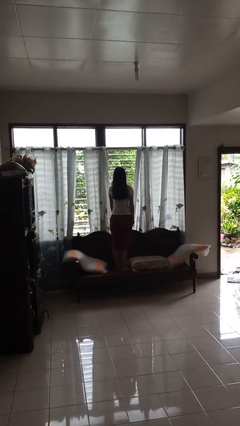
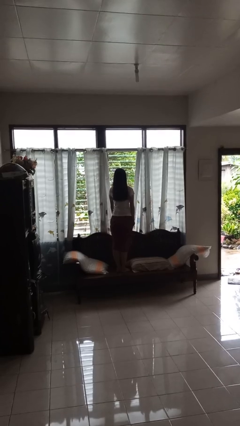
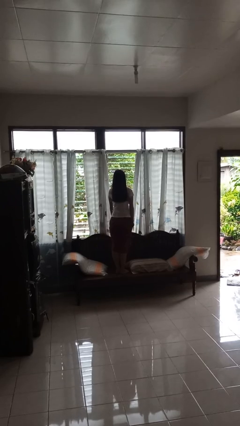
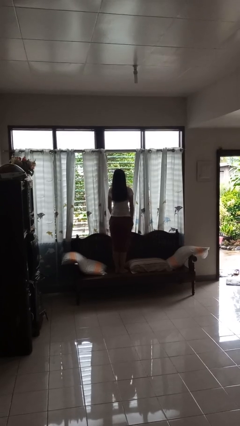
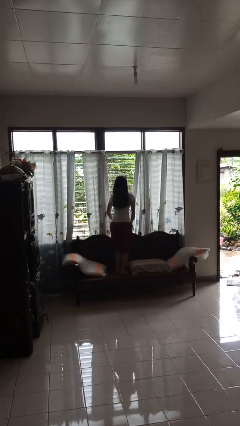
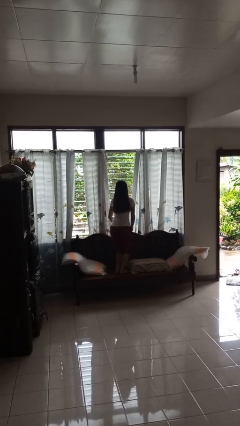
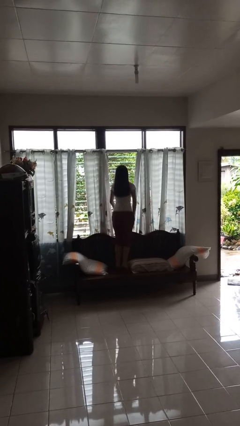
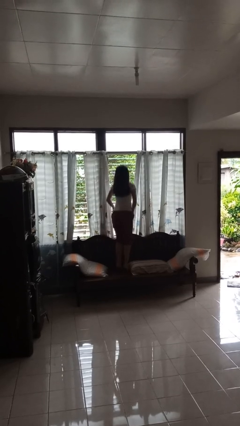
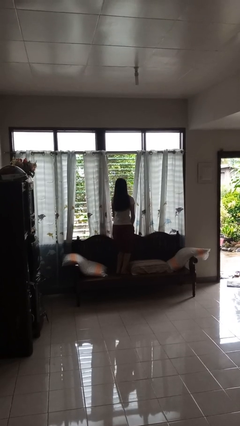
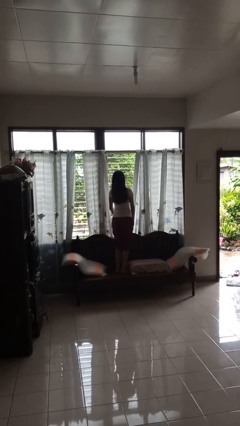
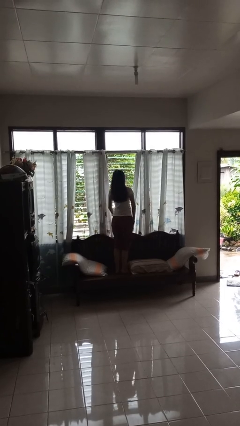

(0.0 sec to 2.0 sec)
person jumps on couch

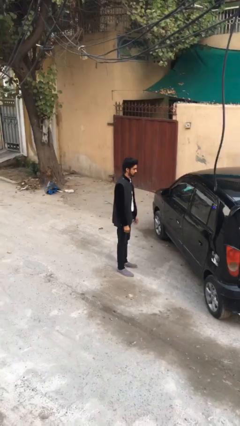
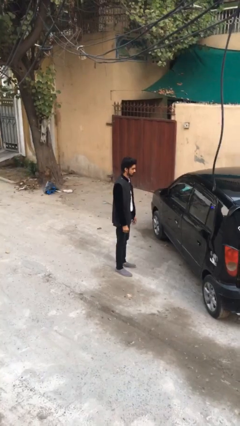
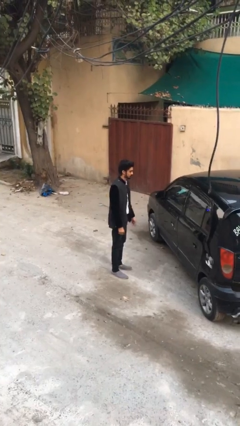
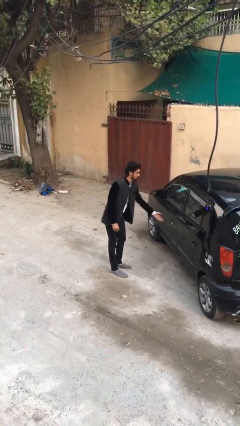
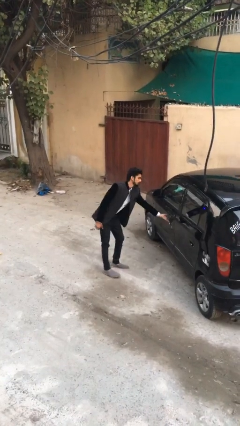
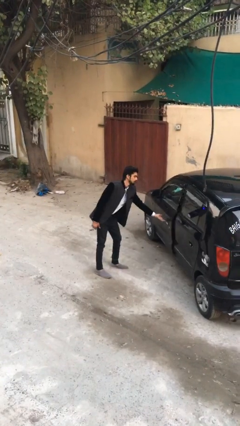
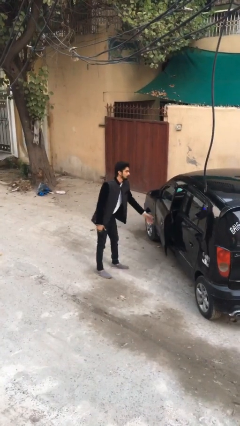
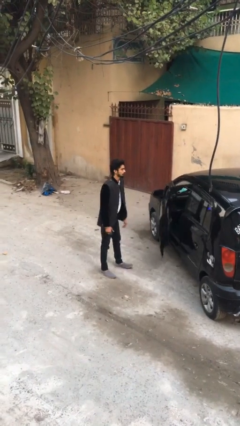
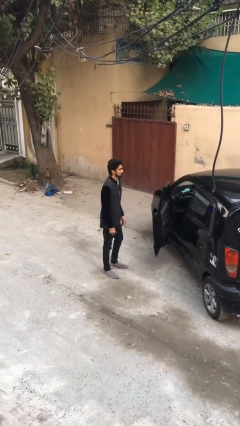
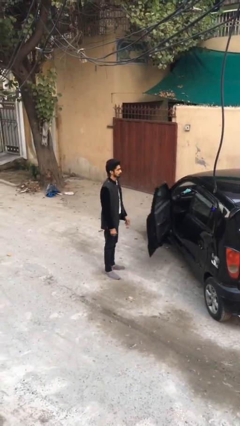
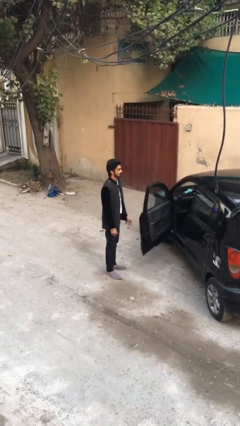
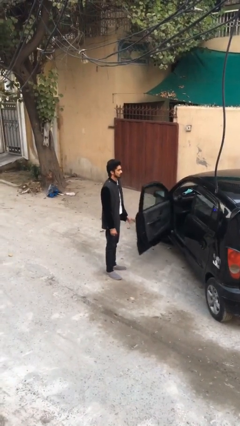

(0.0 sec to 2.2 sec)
person opens car door

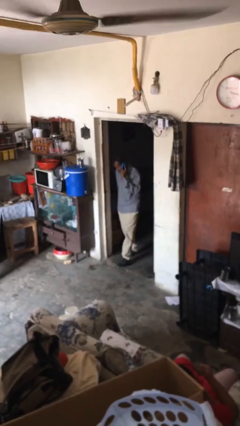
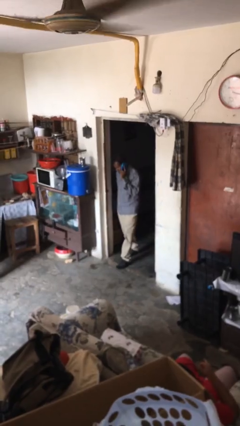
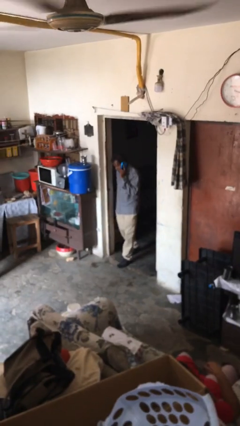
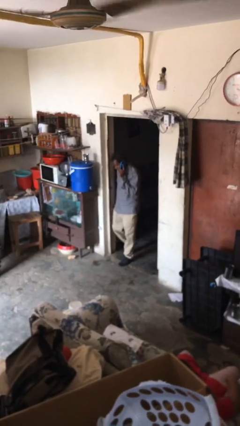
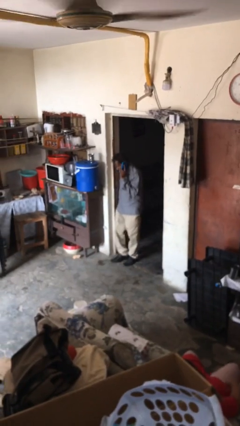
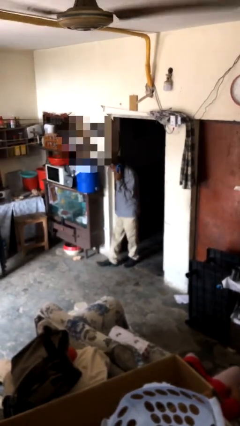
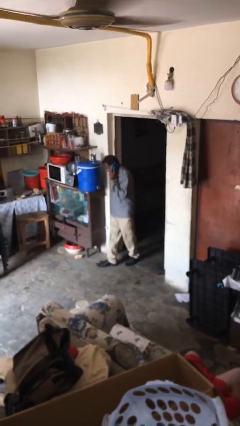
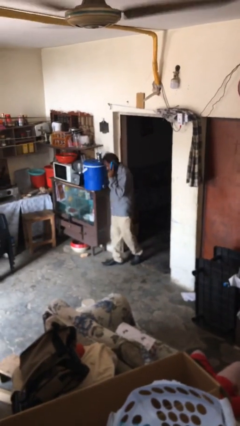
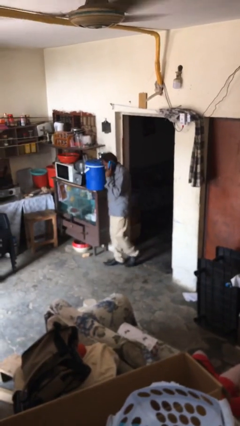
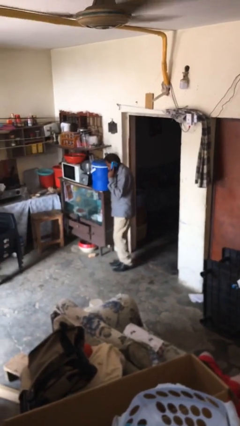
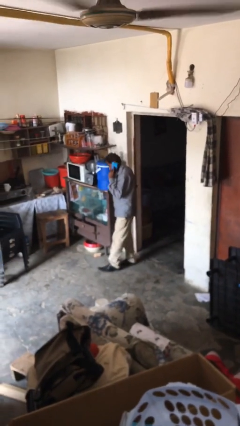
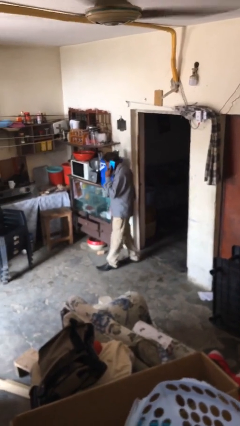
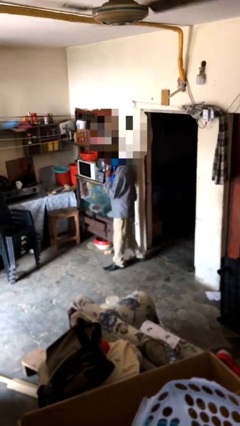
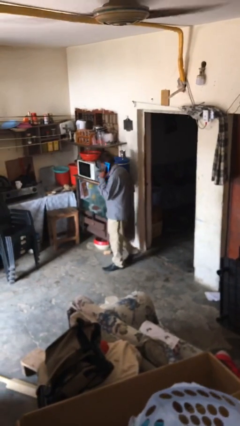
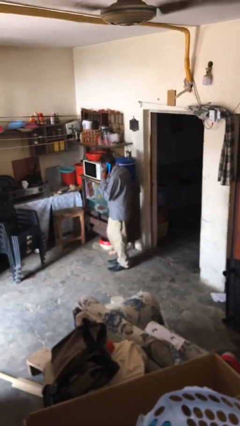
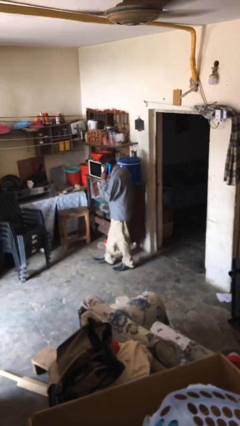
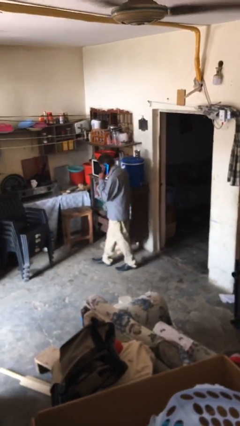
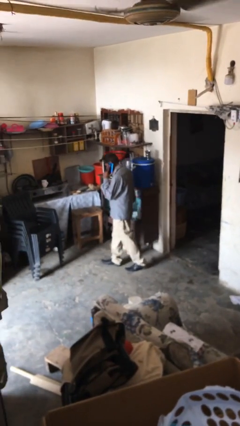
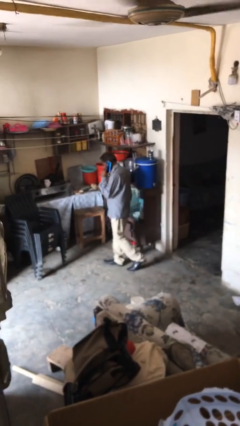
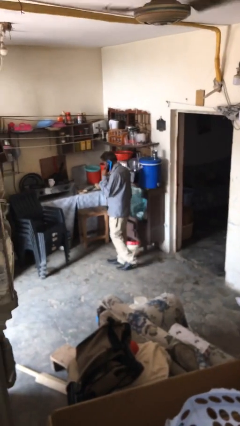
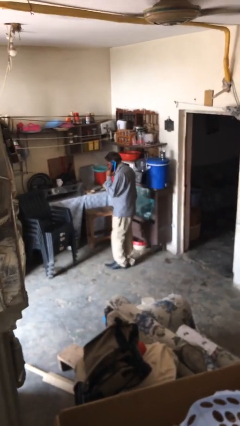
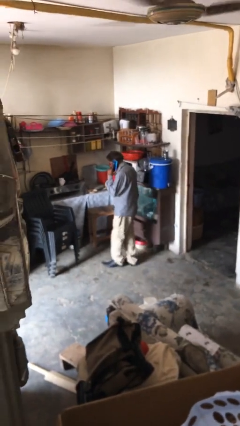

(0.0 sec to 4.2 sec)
person enters scene through structure

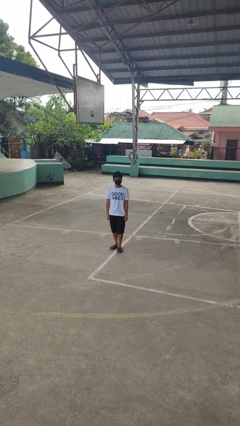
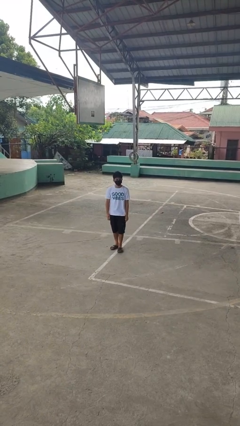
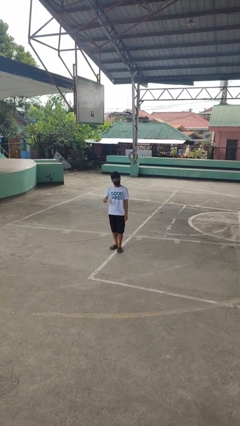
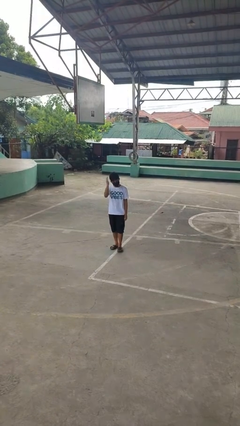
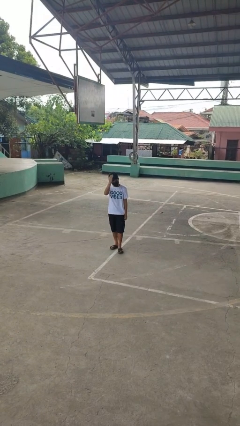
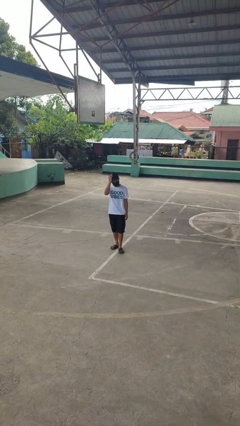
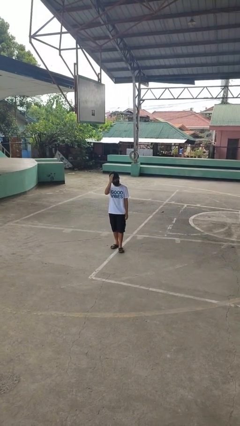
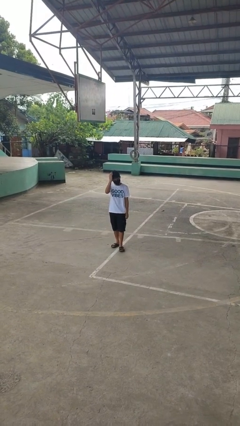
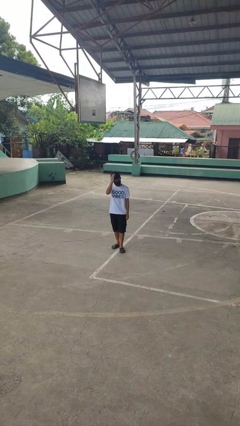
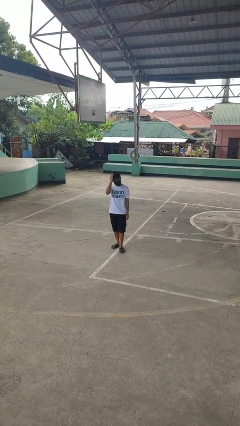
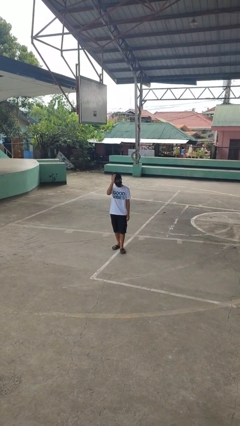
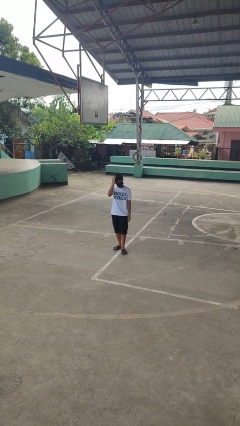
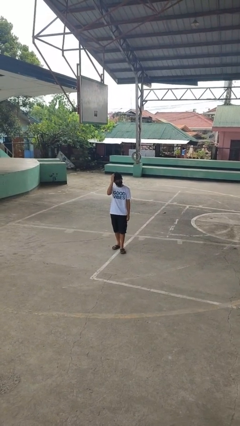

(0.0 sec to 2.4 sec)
person pats head

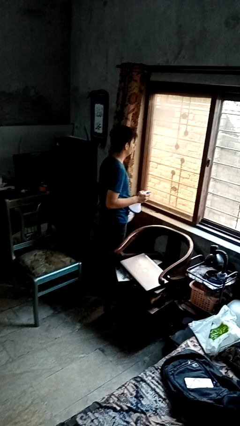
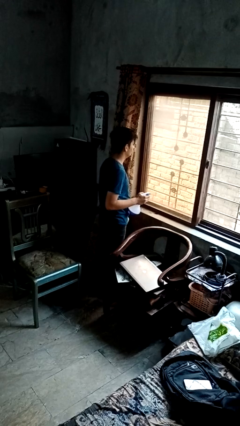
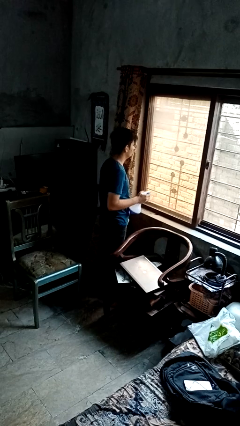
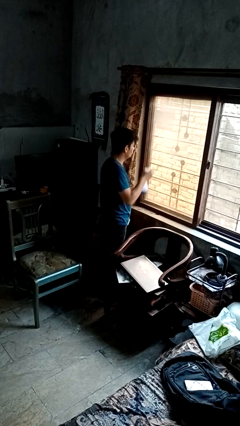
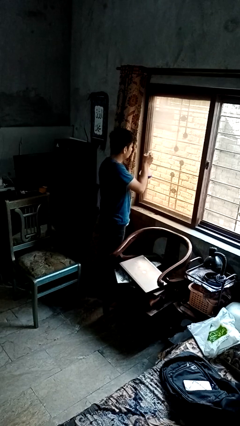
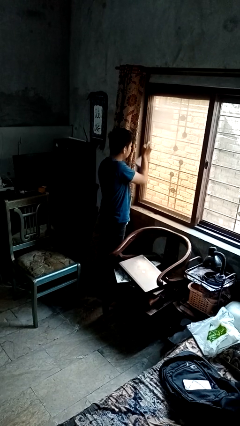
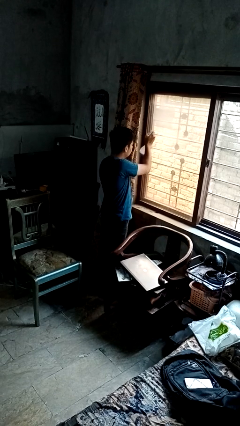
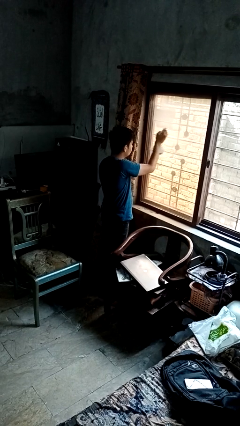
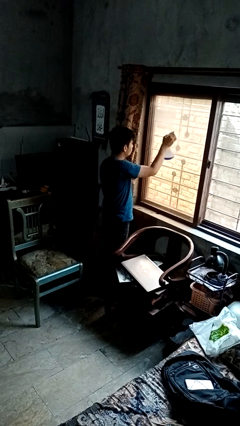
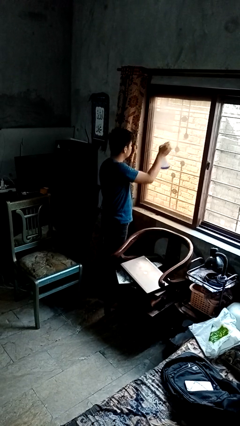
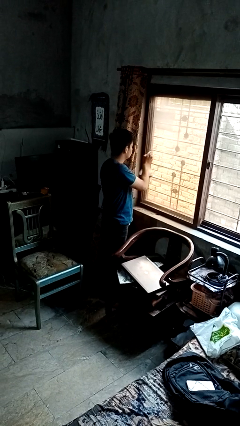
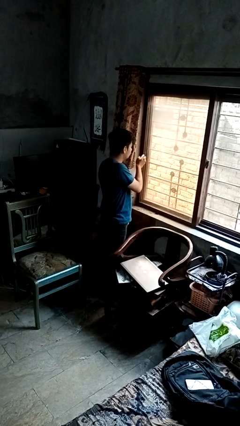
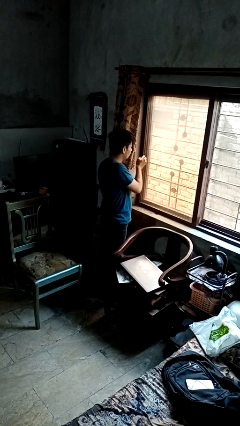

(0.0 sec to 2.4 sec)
person sprays from bottle

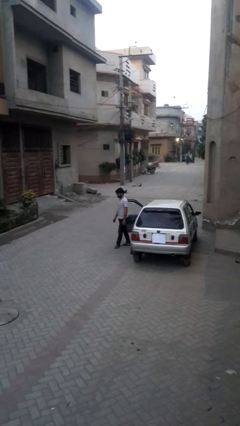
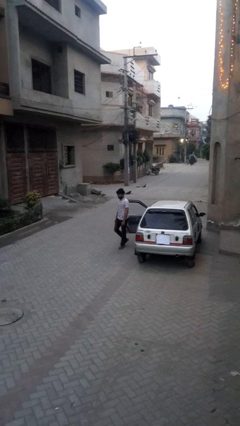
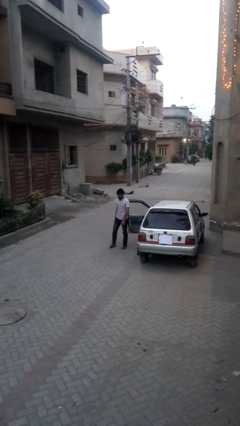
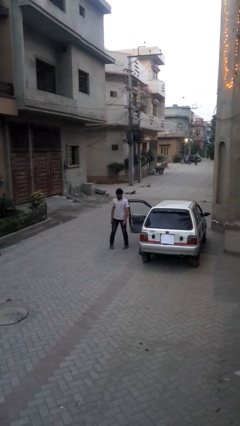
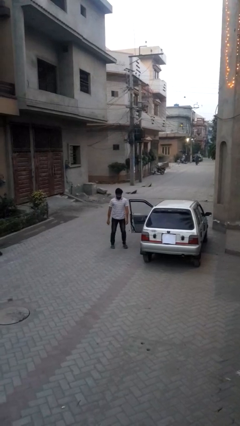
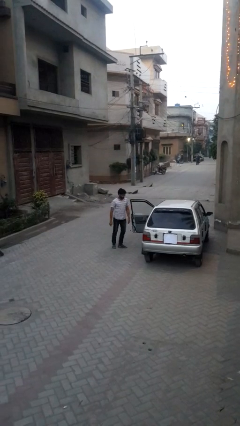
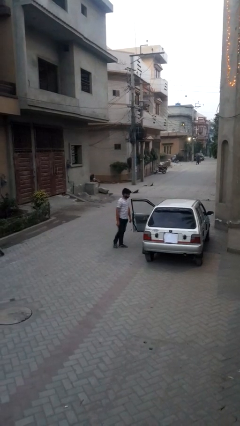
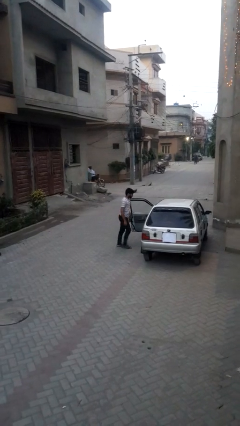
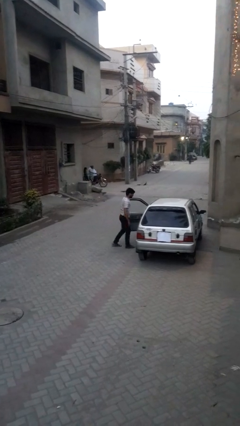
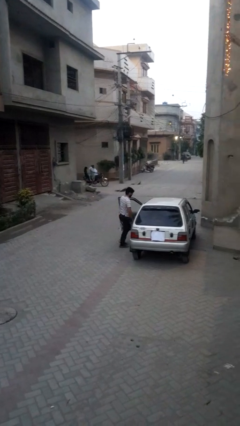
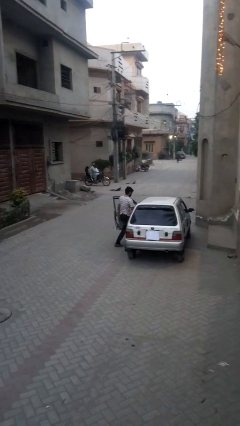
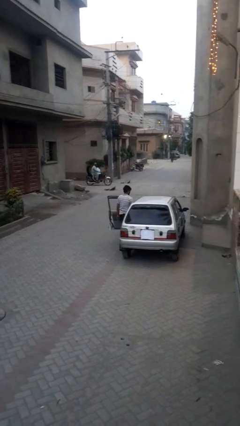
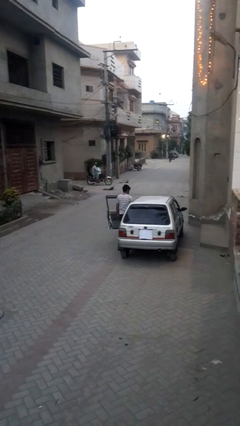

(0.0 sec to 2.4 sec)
person exits car

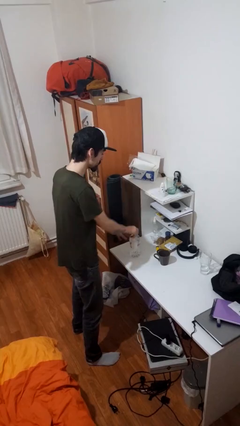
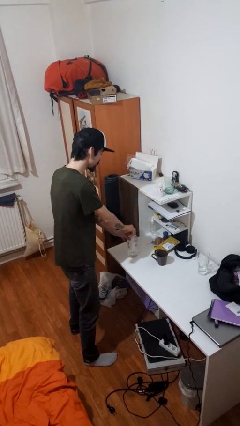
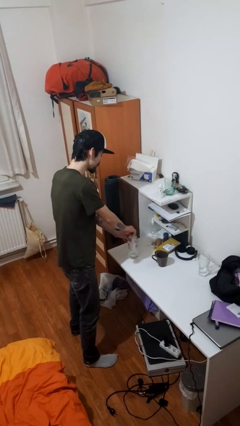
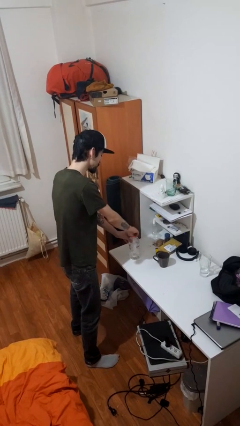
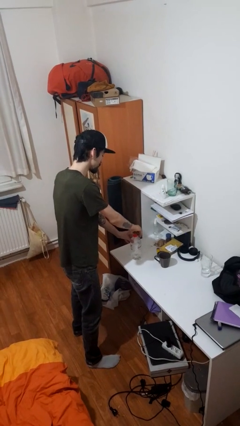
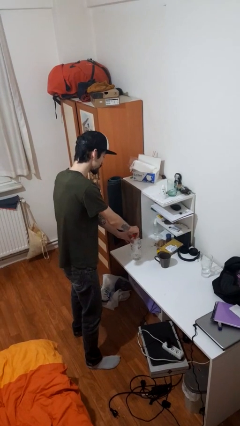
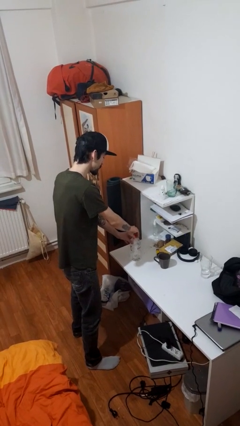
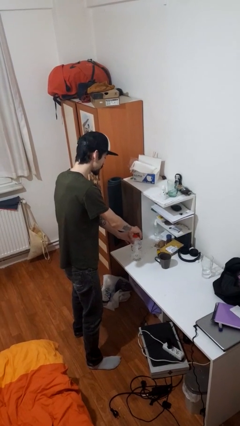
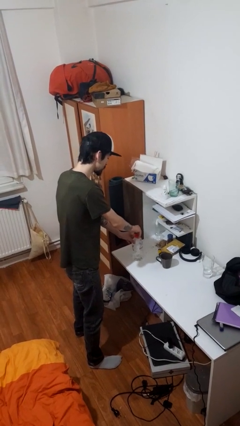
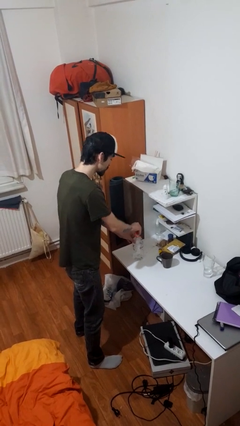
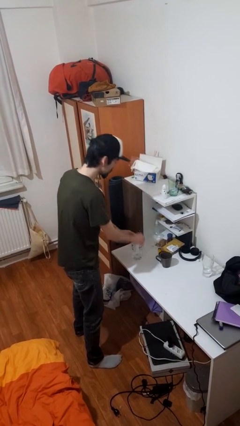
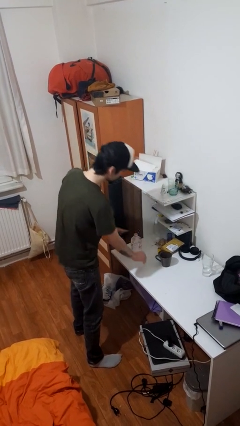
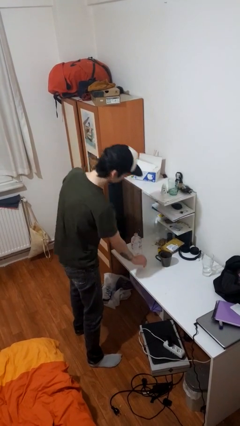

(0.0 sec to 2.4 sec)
person unscrews lid from bottle
